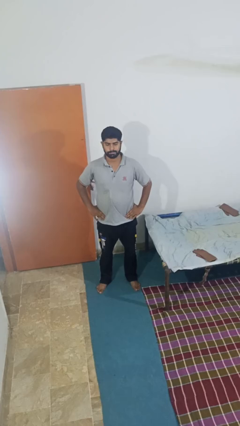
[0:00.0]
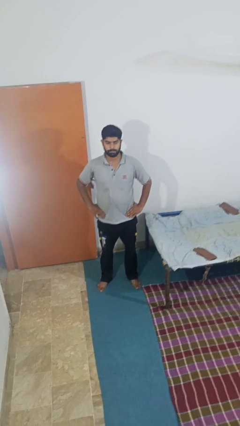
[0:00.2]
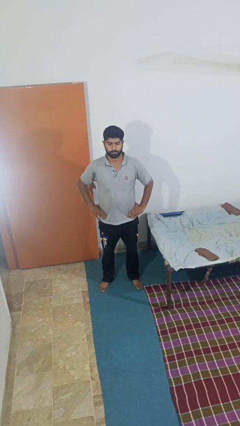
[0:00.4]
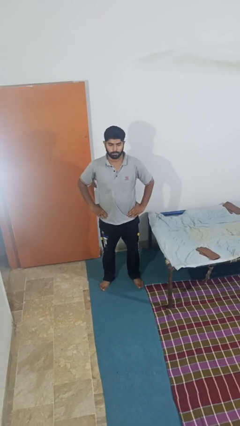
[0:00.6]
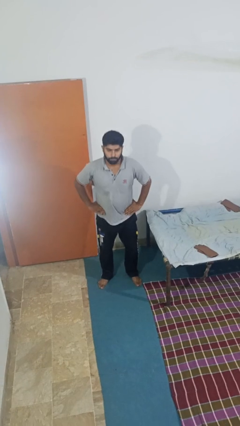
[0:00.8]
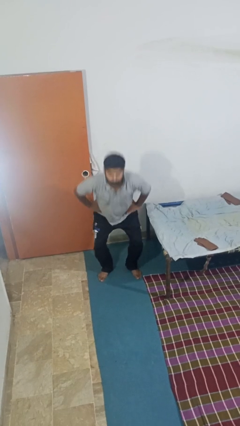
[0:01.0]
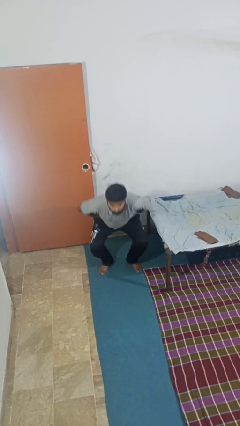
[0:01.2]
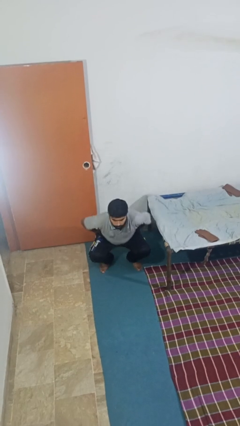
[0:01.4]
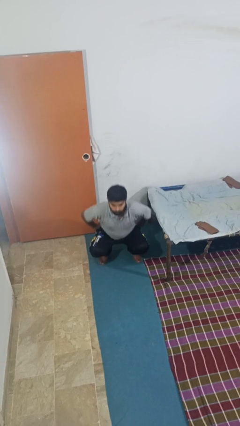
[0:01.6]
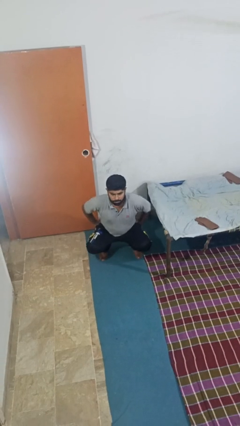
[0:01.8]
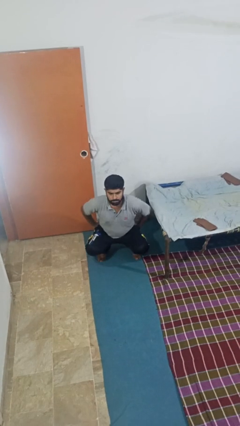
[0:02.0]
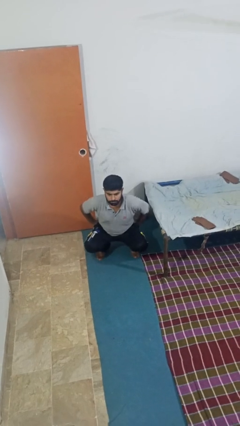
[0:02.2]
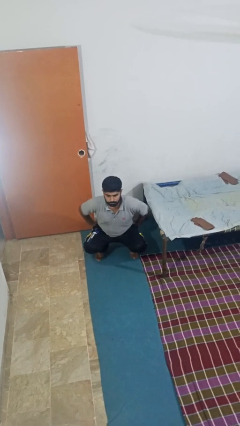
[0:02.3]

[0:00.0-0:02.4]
person squats

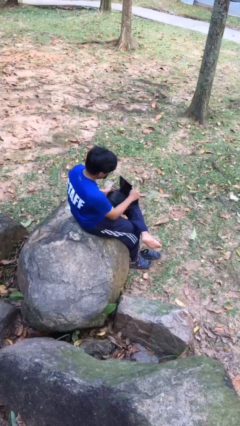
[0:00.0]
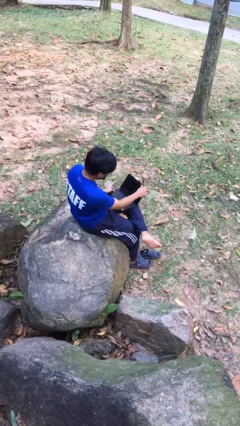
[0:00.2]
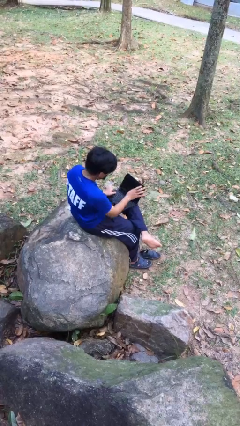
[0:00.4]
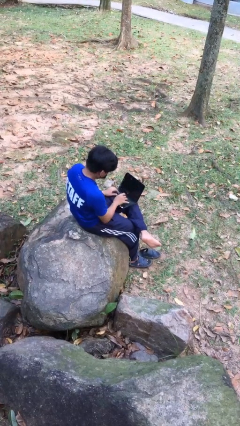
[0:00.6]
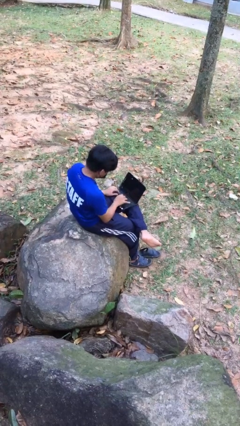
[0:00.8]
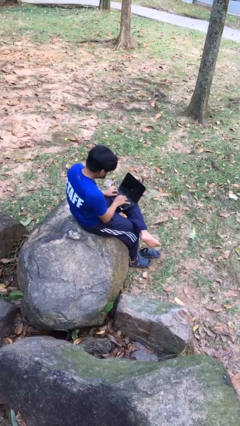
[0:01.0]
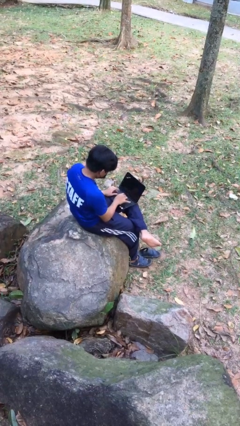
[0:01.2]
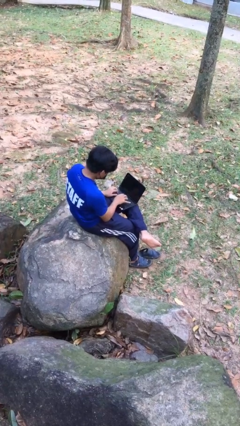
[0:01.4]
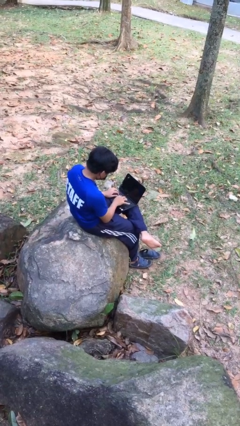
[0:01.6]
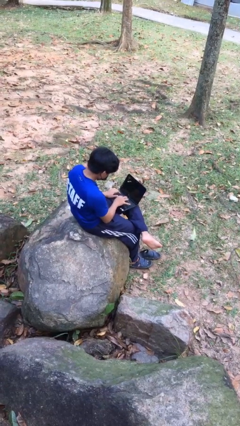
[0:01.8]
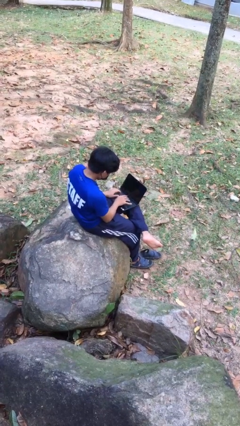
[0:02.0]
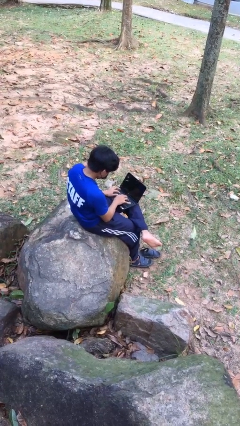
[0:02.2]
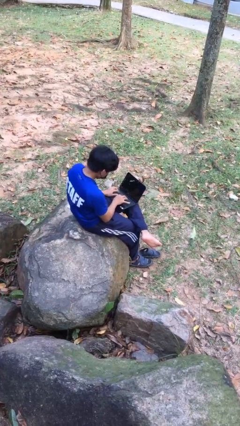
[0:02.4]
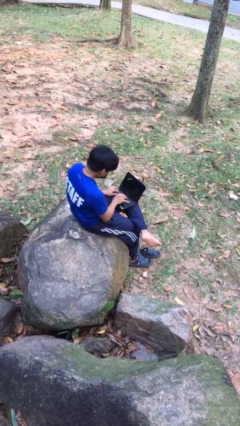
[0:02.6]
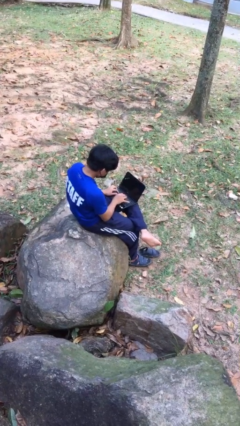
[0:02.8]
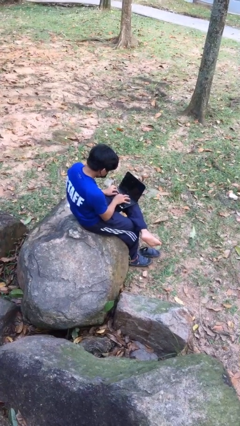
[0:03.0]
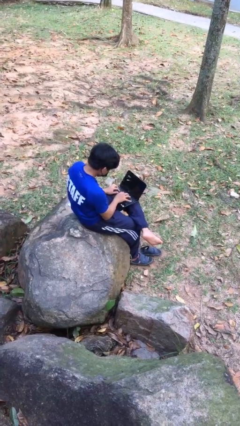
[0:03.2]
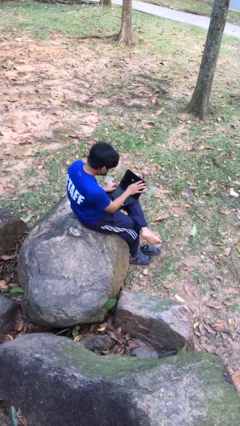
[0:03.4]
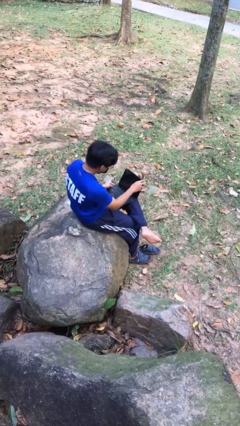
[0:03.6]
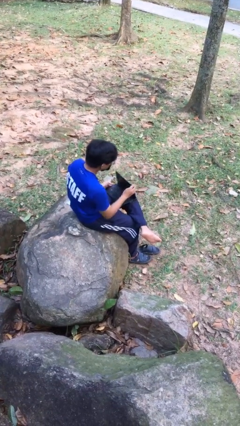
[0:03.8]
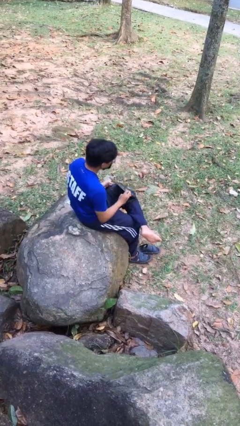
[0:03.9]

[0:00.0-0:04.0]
person interacts with laptop

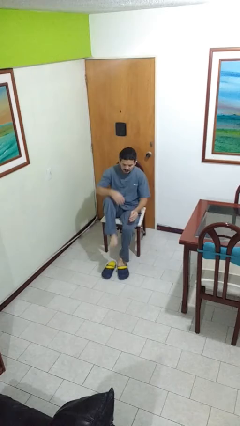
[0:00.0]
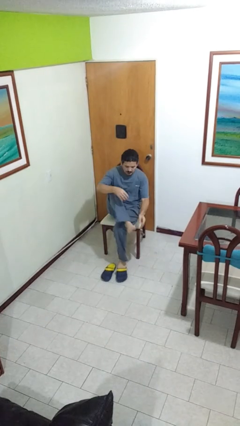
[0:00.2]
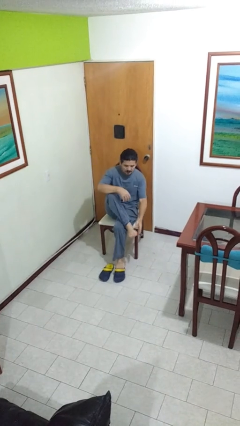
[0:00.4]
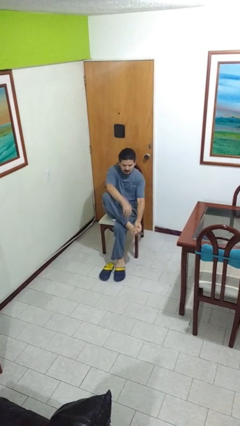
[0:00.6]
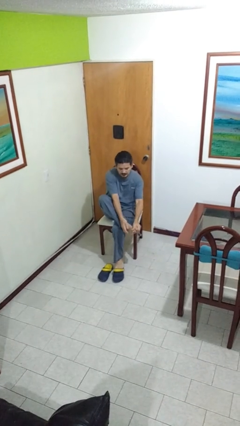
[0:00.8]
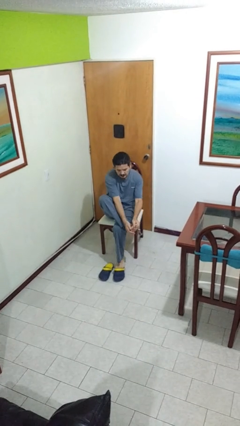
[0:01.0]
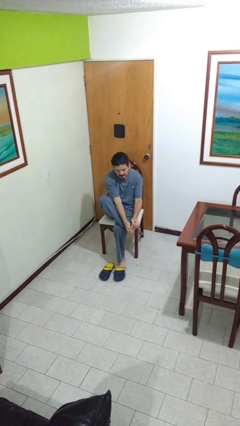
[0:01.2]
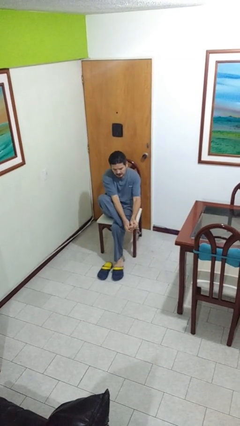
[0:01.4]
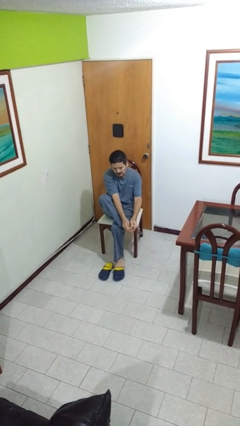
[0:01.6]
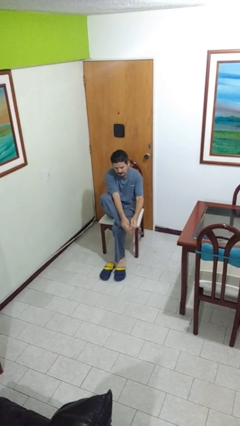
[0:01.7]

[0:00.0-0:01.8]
person rubs foot

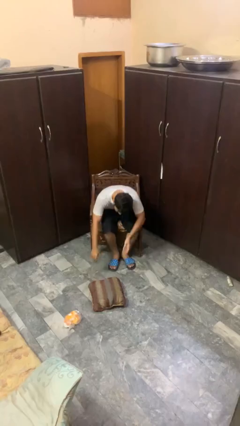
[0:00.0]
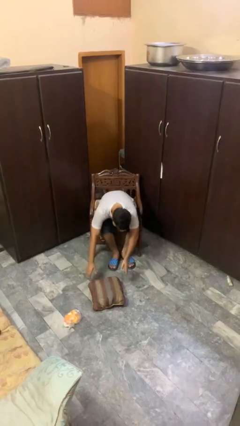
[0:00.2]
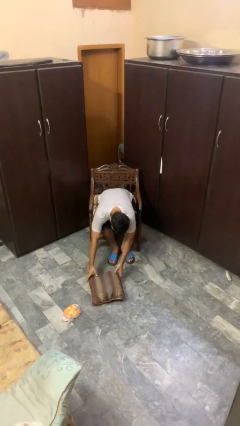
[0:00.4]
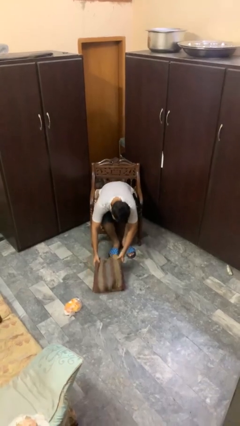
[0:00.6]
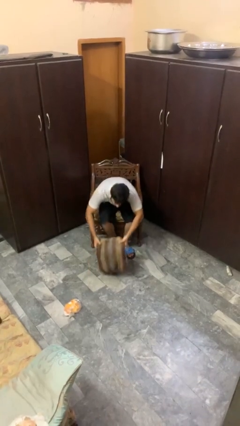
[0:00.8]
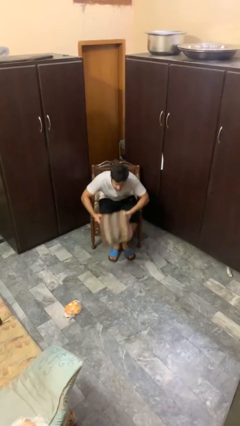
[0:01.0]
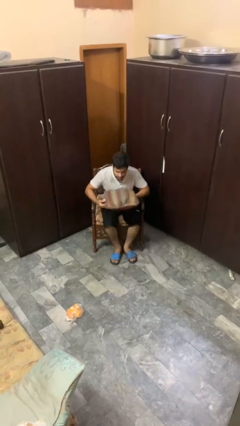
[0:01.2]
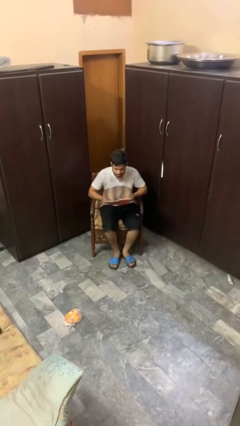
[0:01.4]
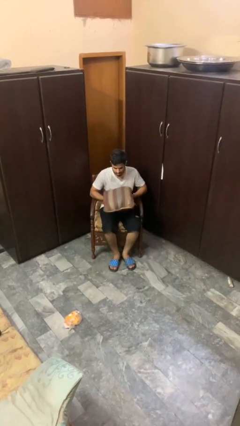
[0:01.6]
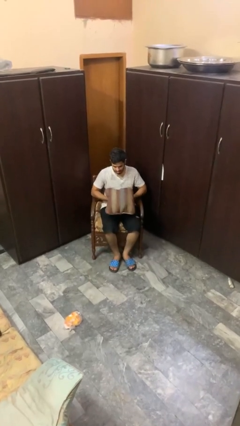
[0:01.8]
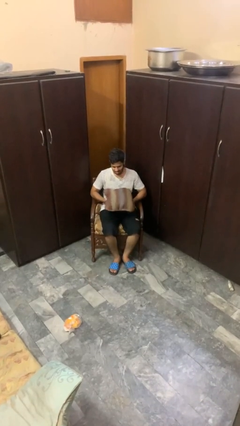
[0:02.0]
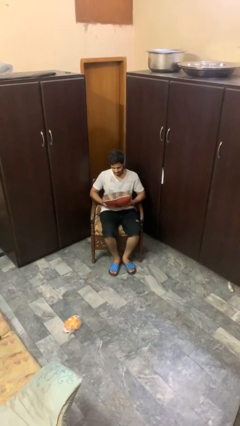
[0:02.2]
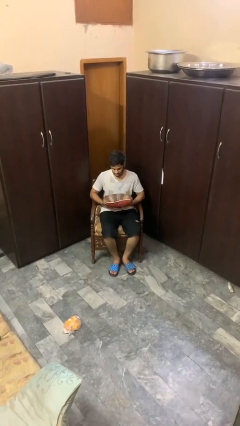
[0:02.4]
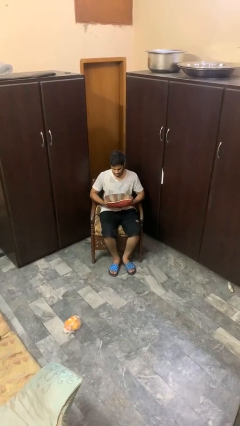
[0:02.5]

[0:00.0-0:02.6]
person picks up object from floor

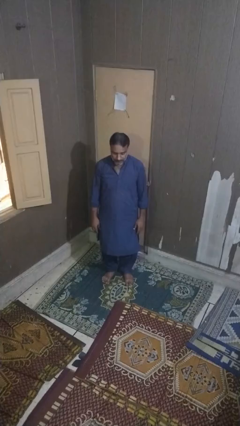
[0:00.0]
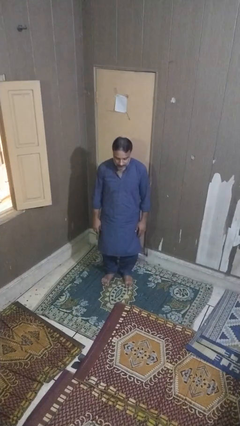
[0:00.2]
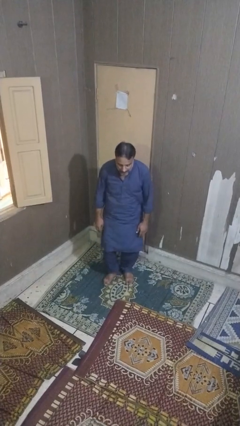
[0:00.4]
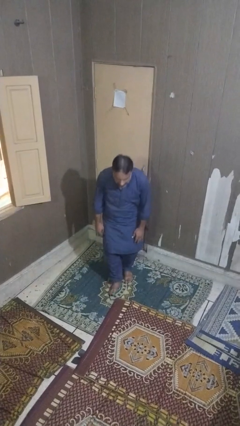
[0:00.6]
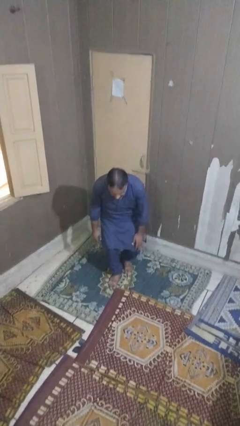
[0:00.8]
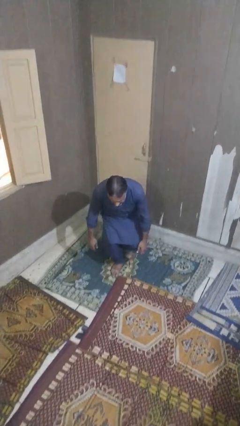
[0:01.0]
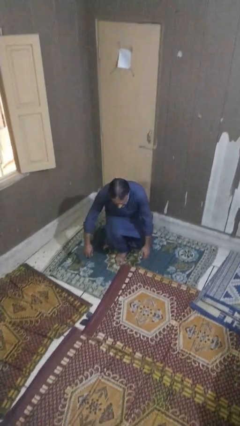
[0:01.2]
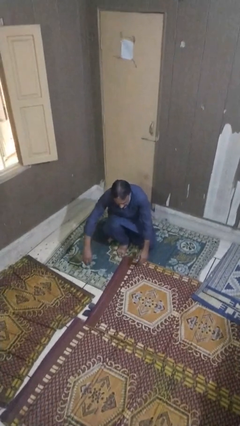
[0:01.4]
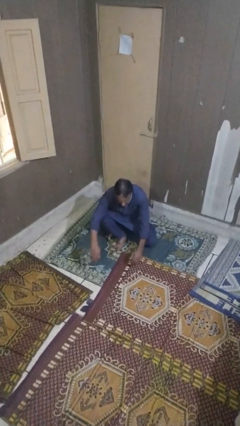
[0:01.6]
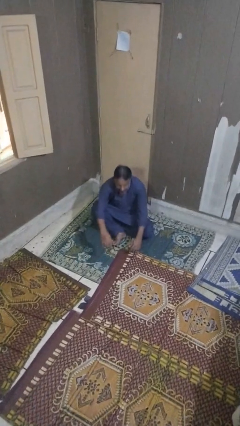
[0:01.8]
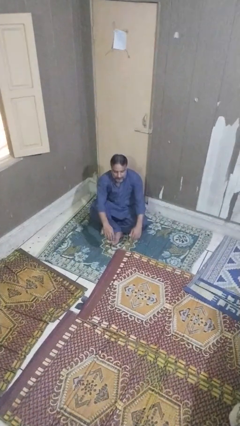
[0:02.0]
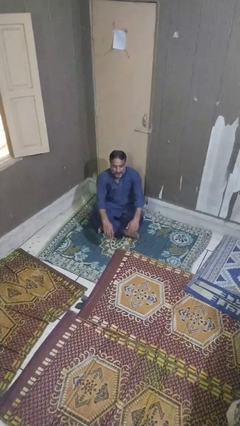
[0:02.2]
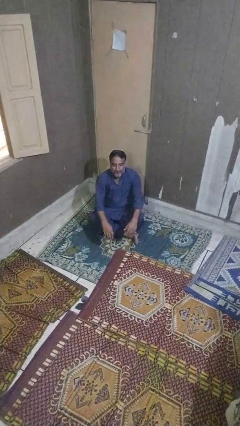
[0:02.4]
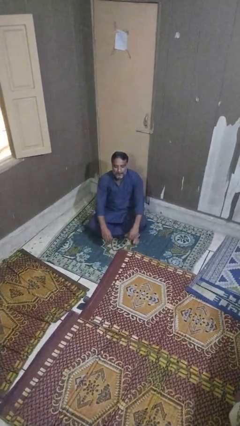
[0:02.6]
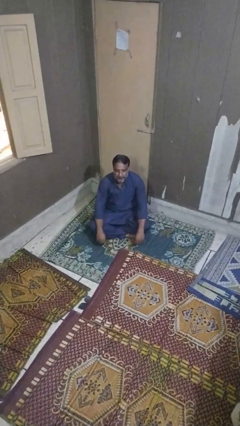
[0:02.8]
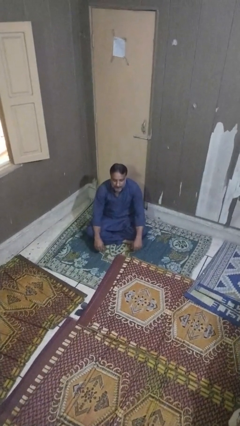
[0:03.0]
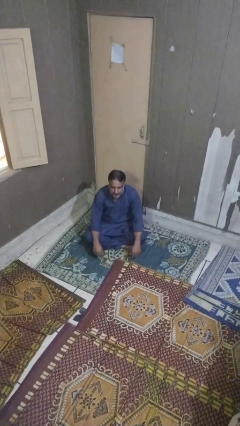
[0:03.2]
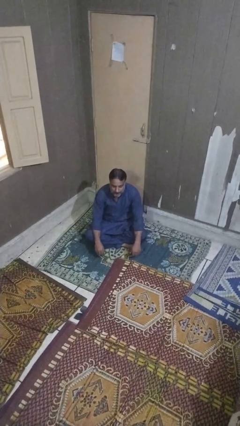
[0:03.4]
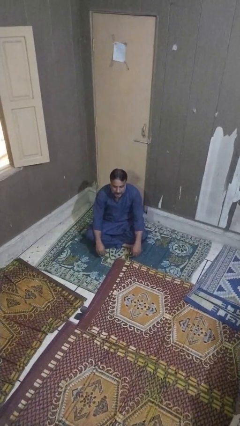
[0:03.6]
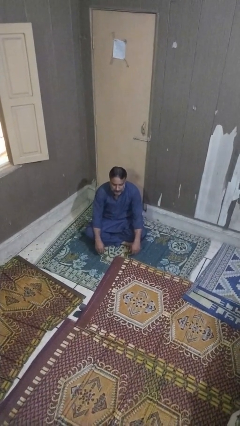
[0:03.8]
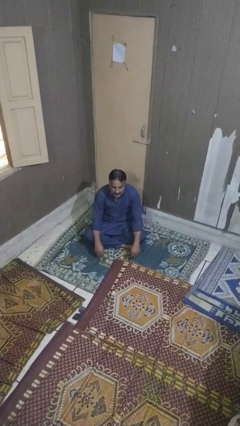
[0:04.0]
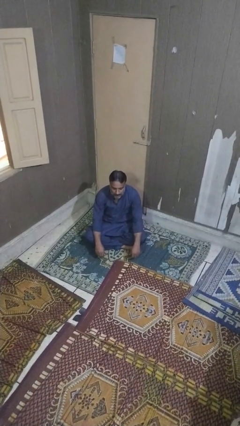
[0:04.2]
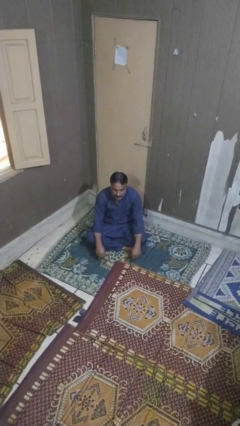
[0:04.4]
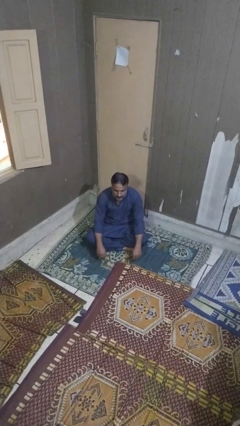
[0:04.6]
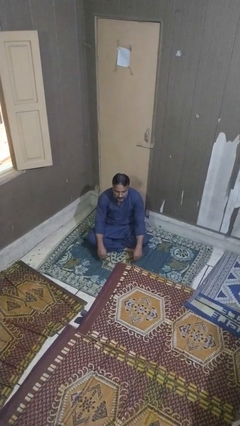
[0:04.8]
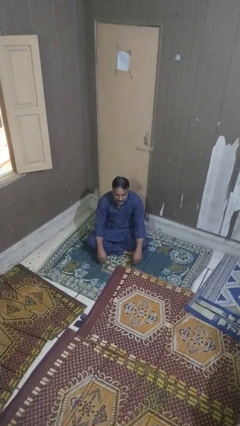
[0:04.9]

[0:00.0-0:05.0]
person sits crisscross

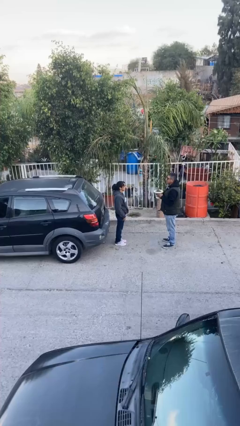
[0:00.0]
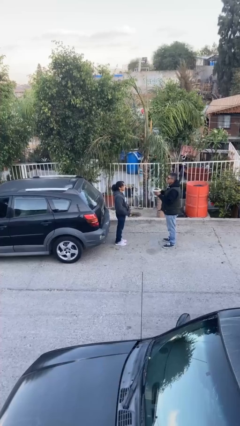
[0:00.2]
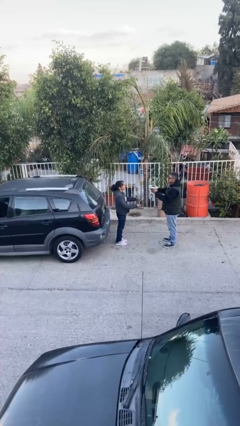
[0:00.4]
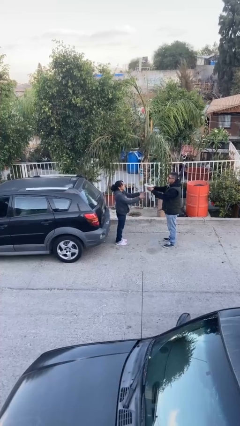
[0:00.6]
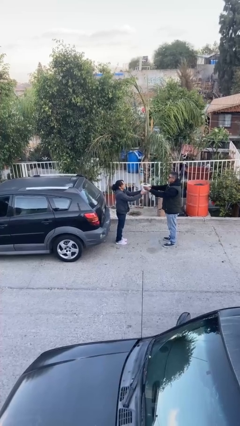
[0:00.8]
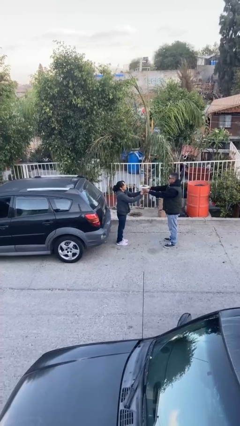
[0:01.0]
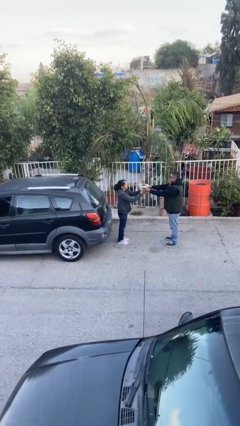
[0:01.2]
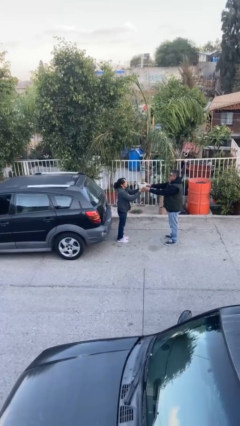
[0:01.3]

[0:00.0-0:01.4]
person transfers object to person
